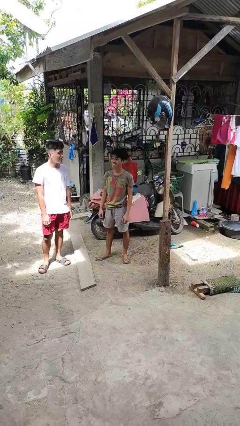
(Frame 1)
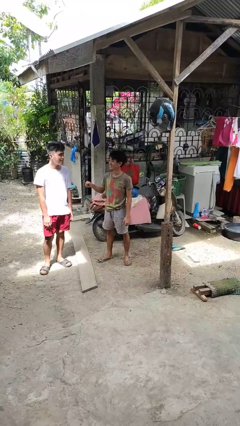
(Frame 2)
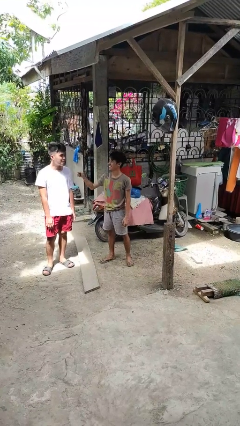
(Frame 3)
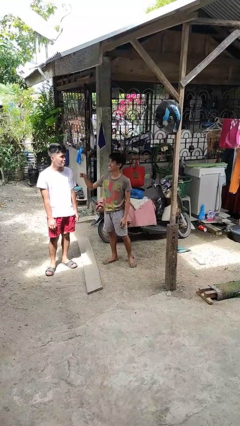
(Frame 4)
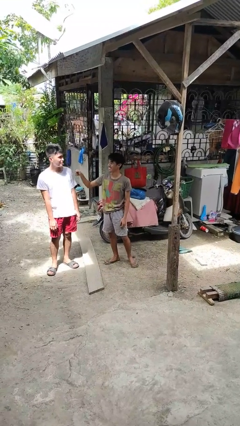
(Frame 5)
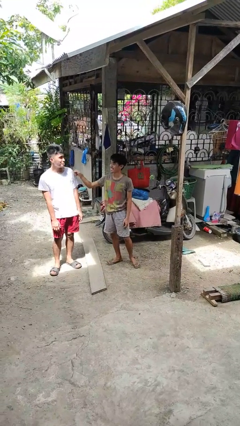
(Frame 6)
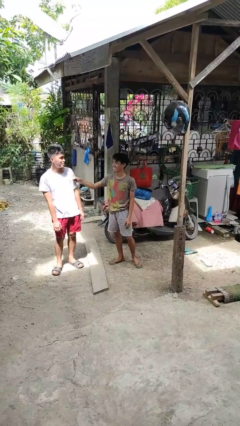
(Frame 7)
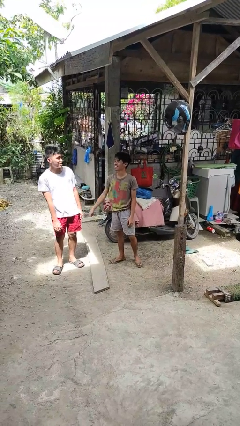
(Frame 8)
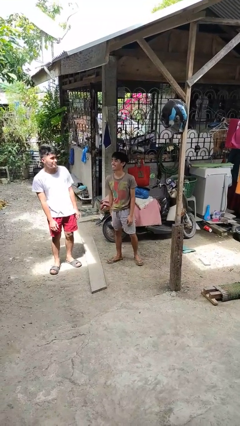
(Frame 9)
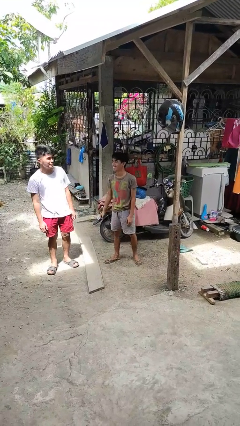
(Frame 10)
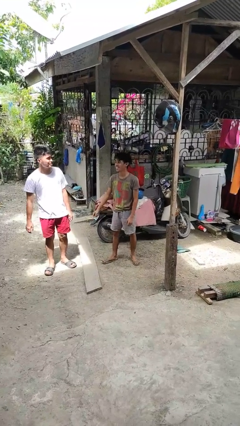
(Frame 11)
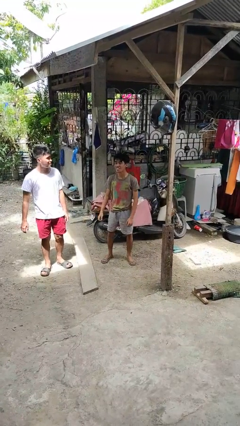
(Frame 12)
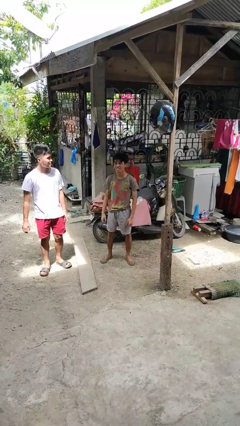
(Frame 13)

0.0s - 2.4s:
person pounds shoulders of person

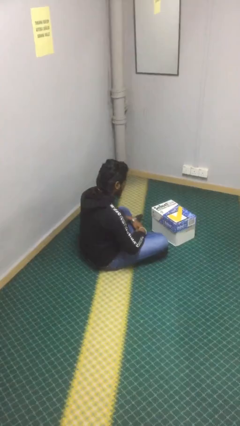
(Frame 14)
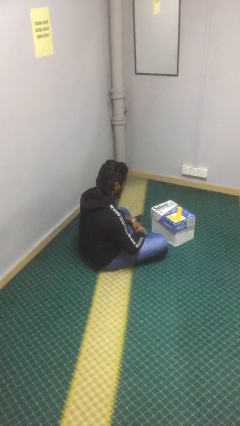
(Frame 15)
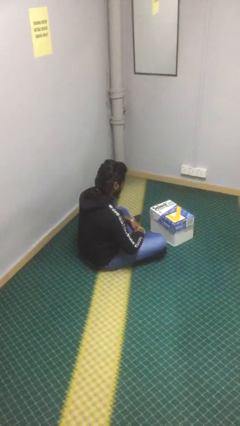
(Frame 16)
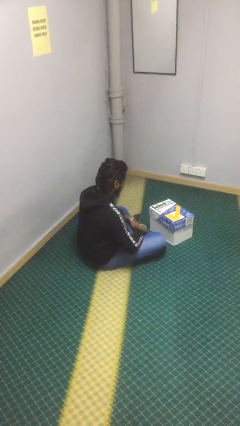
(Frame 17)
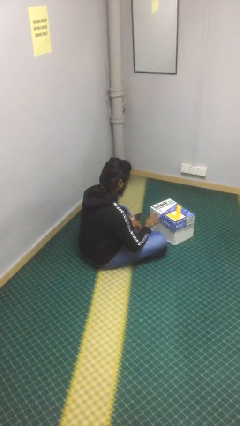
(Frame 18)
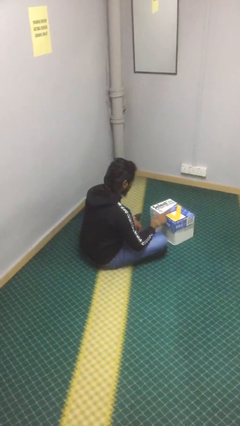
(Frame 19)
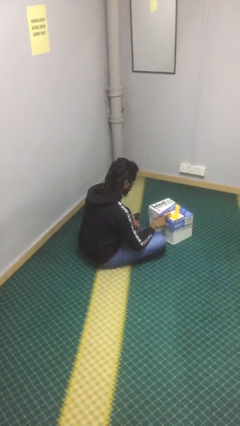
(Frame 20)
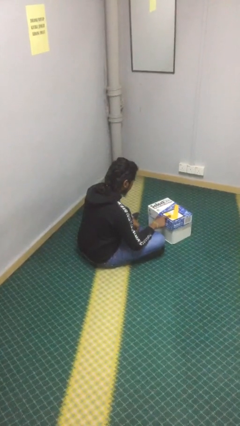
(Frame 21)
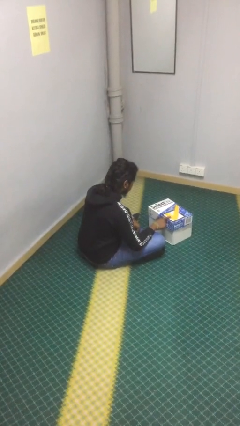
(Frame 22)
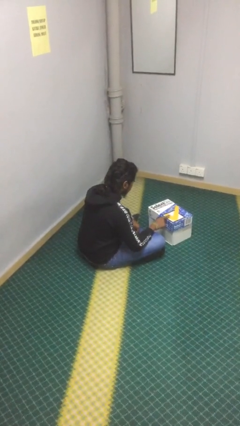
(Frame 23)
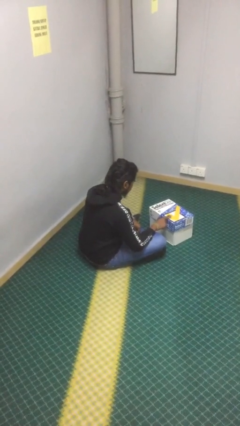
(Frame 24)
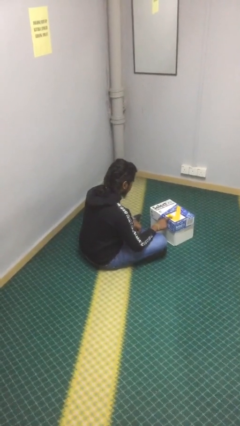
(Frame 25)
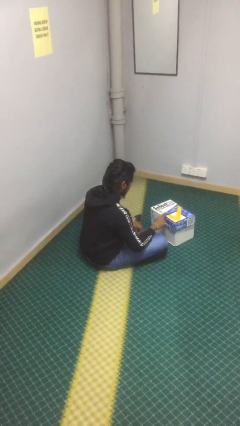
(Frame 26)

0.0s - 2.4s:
person taps object with finger

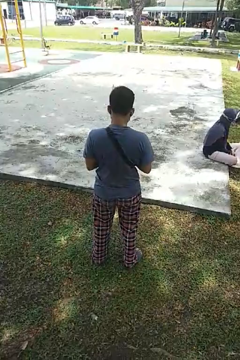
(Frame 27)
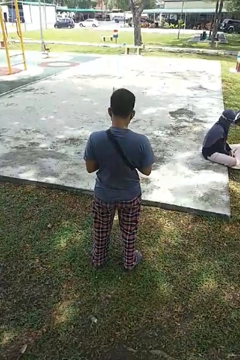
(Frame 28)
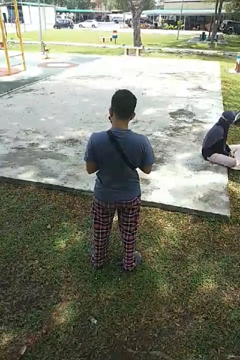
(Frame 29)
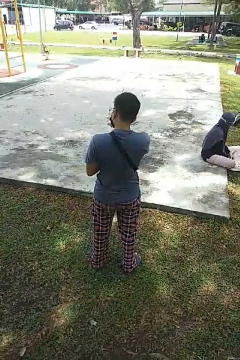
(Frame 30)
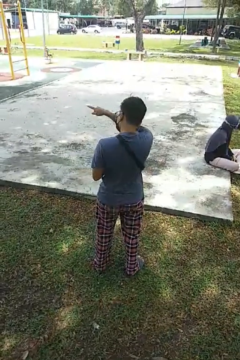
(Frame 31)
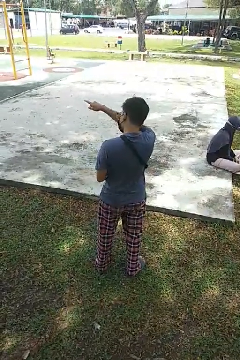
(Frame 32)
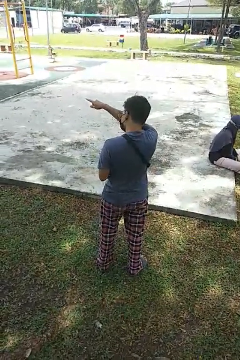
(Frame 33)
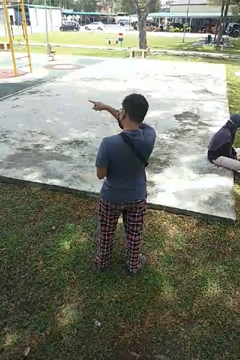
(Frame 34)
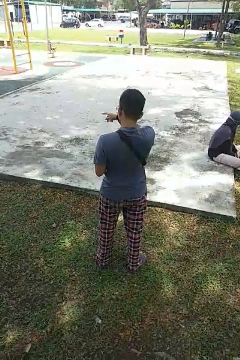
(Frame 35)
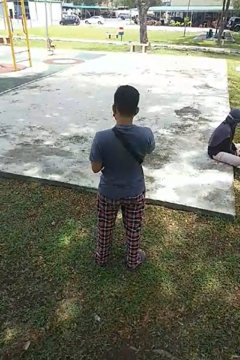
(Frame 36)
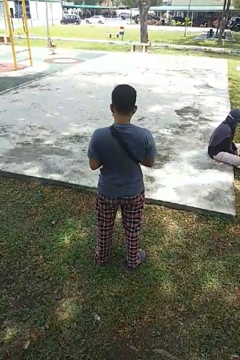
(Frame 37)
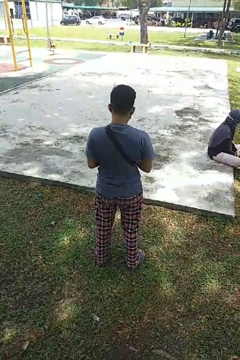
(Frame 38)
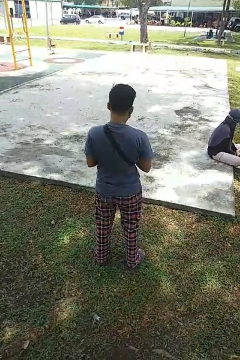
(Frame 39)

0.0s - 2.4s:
person points at person

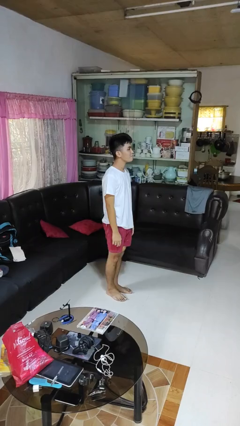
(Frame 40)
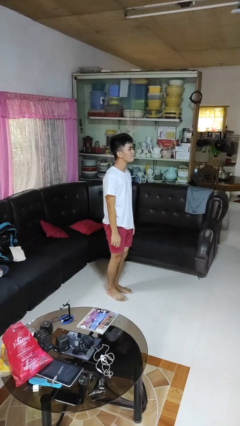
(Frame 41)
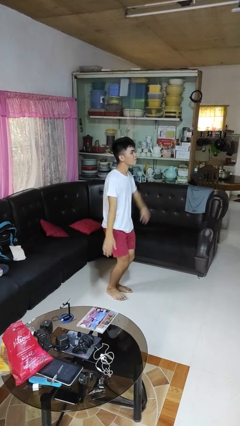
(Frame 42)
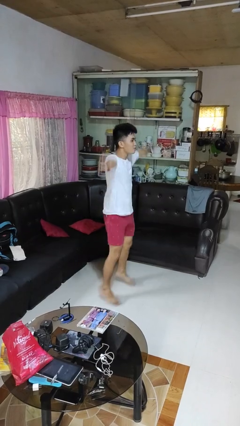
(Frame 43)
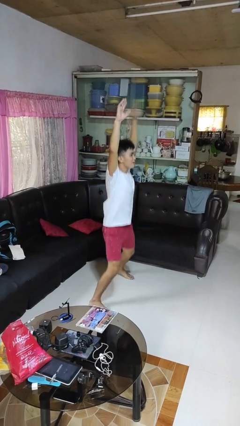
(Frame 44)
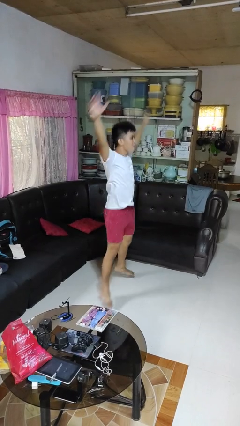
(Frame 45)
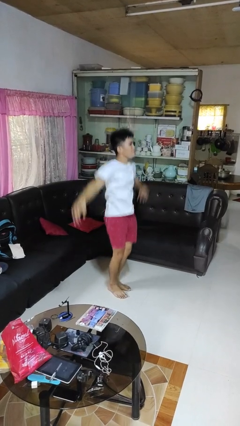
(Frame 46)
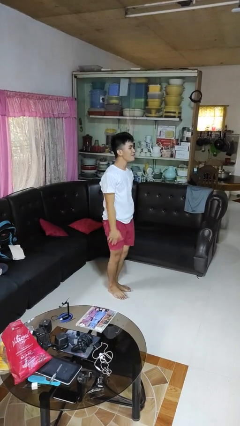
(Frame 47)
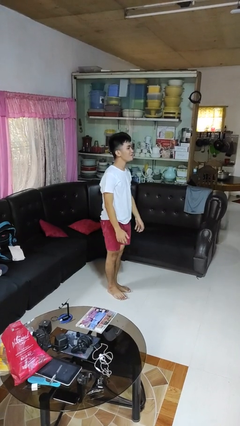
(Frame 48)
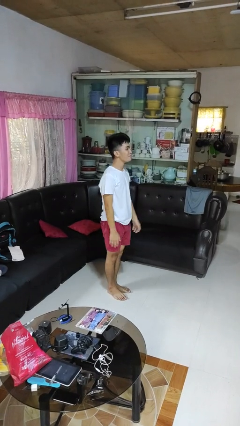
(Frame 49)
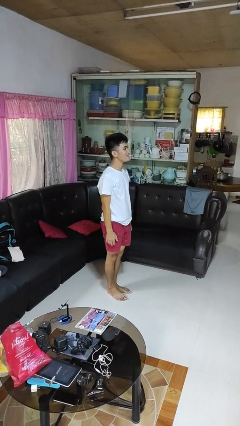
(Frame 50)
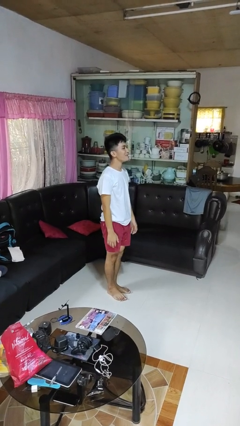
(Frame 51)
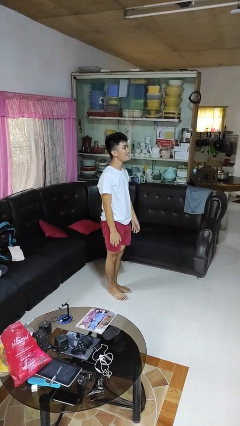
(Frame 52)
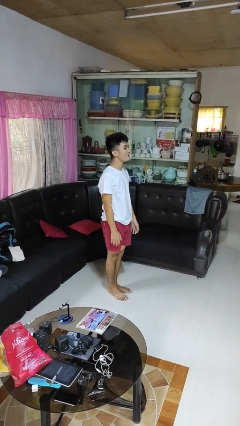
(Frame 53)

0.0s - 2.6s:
person exercises with jumping jacks

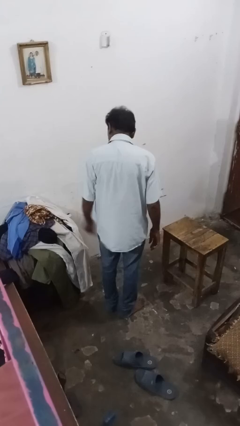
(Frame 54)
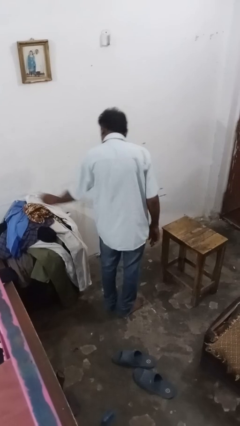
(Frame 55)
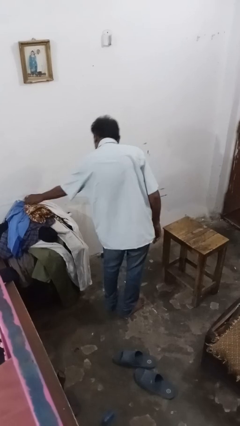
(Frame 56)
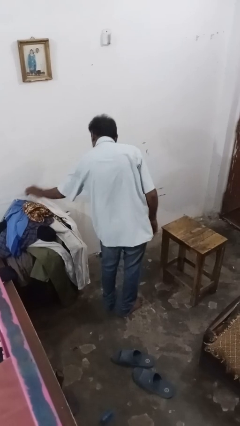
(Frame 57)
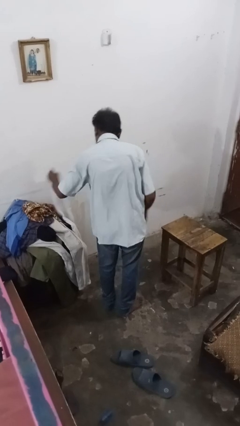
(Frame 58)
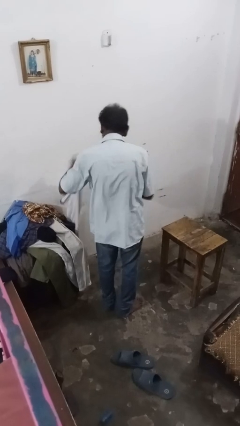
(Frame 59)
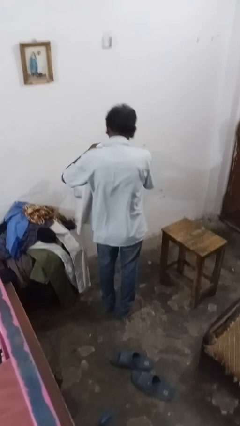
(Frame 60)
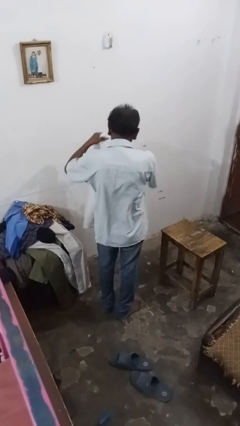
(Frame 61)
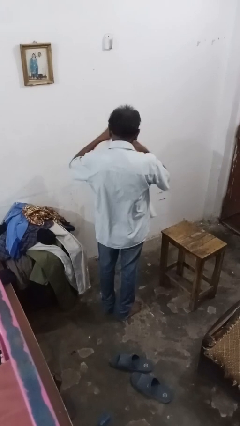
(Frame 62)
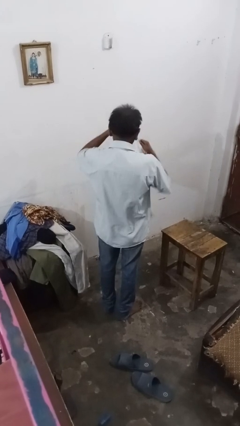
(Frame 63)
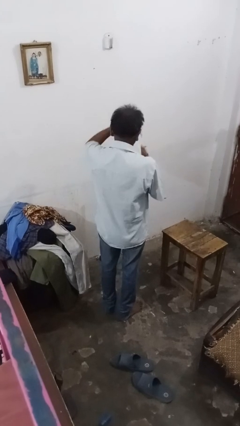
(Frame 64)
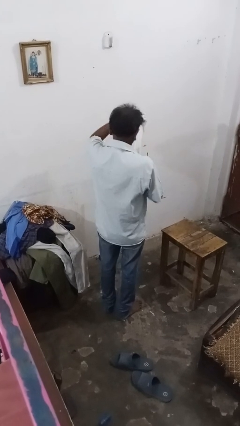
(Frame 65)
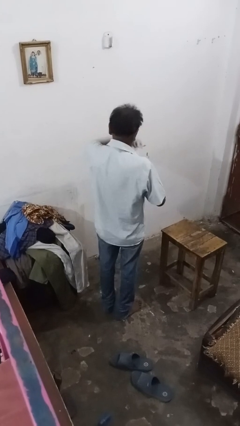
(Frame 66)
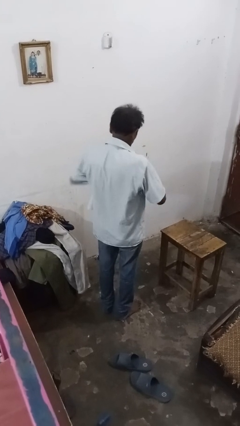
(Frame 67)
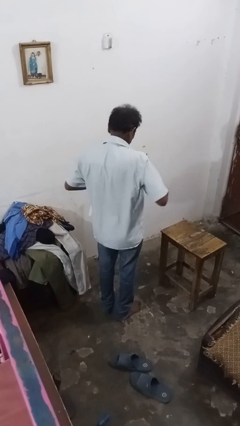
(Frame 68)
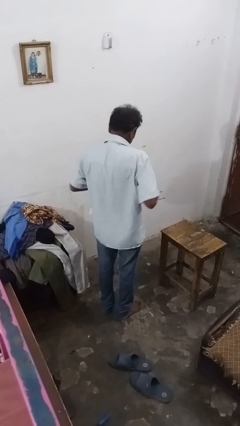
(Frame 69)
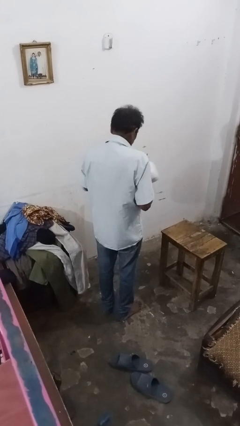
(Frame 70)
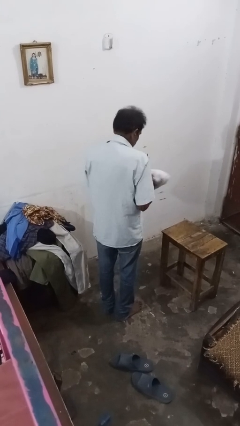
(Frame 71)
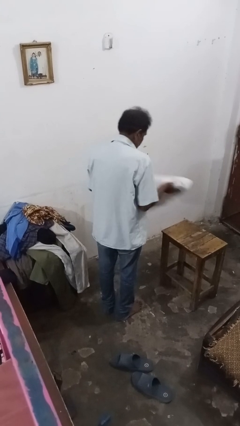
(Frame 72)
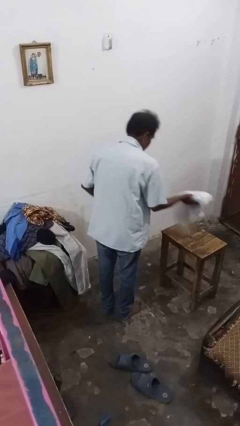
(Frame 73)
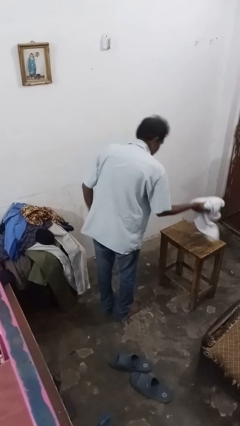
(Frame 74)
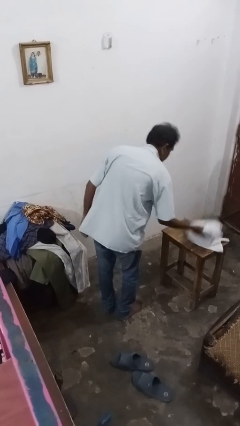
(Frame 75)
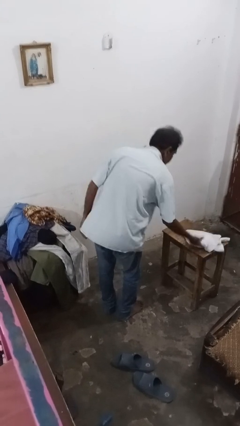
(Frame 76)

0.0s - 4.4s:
person folds shirt

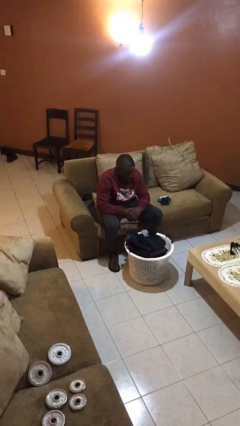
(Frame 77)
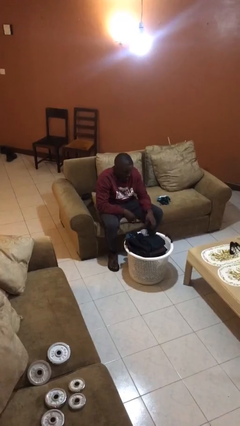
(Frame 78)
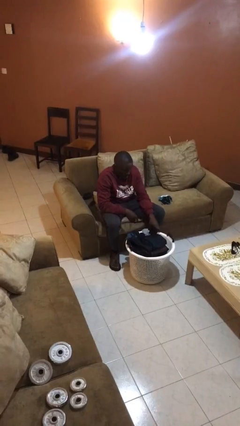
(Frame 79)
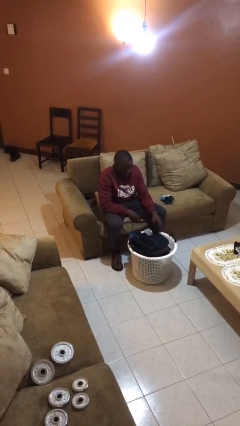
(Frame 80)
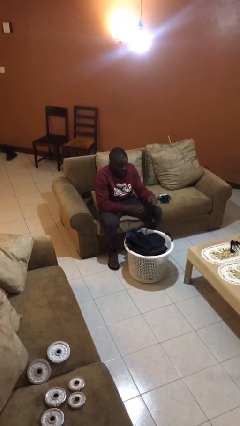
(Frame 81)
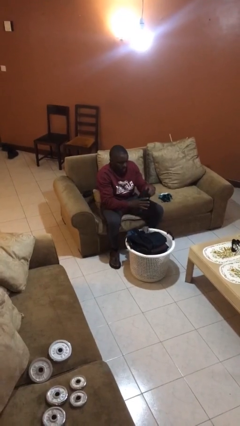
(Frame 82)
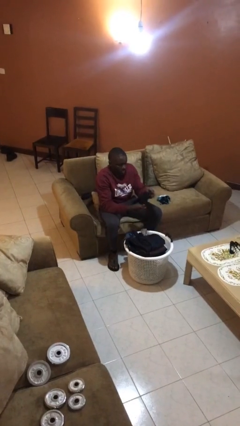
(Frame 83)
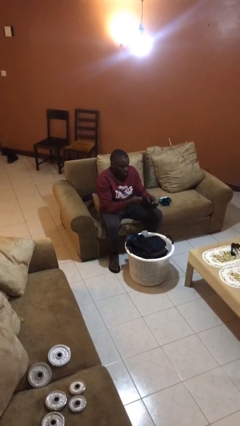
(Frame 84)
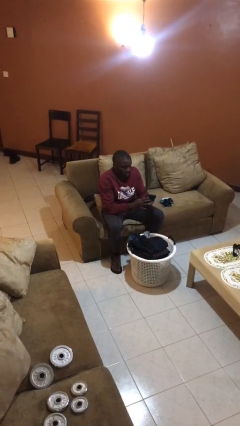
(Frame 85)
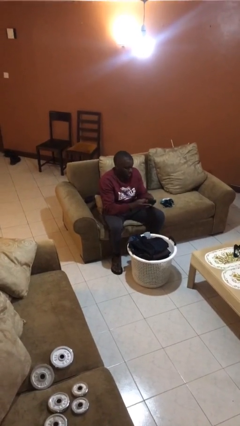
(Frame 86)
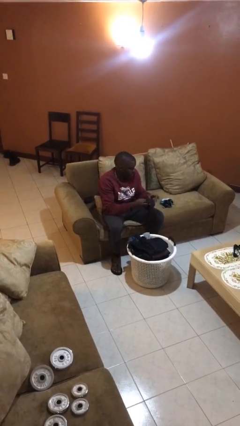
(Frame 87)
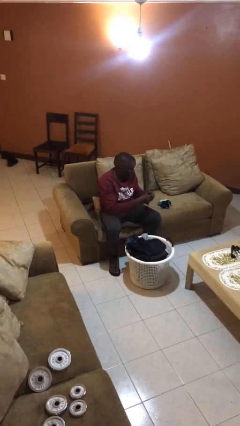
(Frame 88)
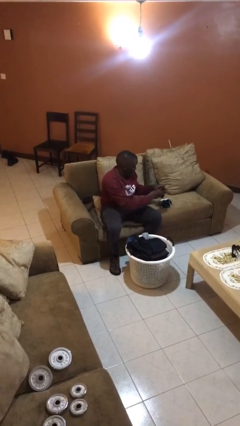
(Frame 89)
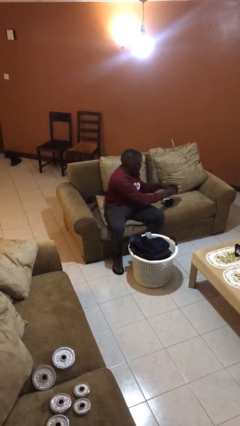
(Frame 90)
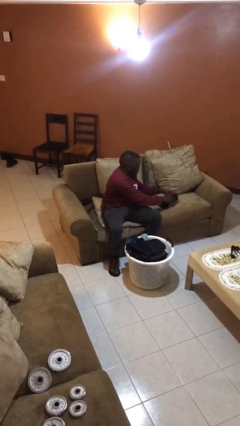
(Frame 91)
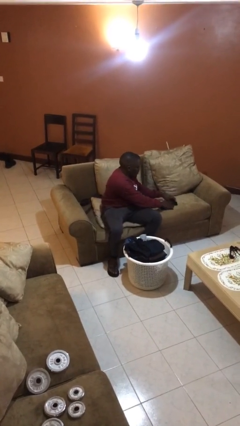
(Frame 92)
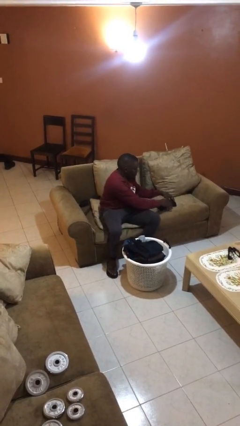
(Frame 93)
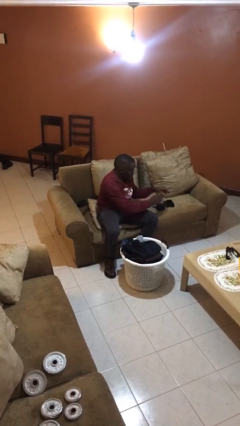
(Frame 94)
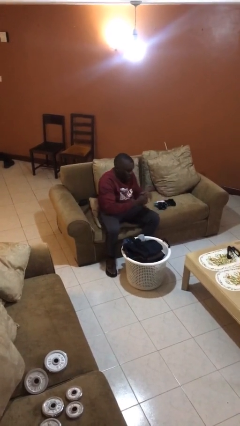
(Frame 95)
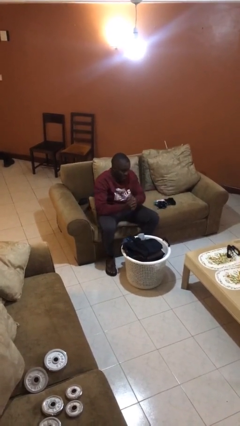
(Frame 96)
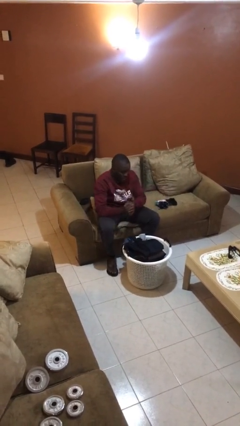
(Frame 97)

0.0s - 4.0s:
person folds socks
